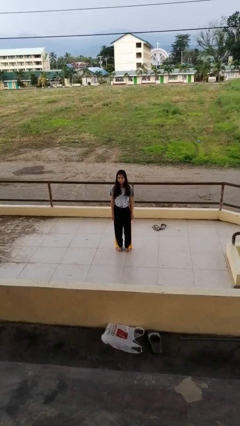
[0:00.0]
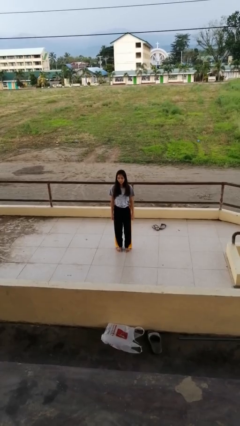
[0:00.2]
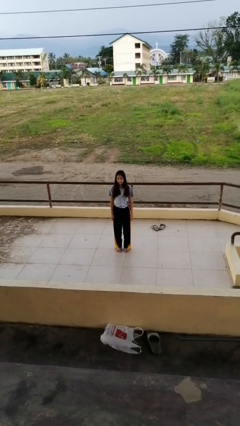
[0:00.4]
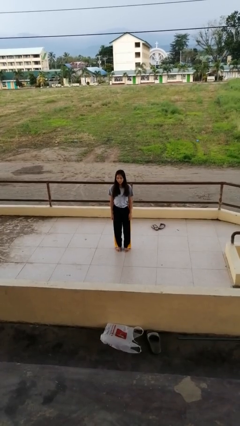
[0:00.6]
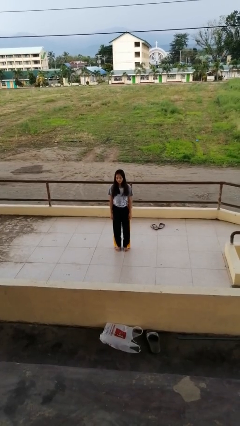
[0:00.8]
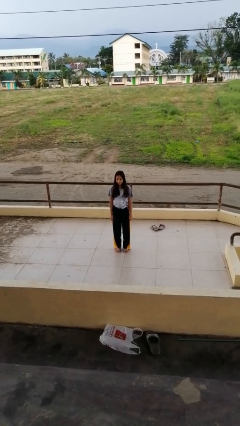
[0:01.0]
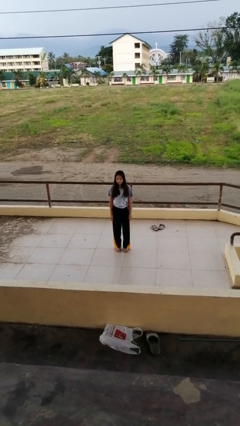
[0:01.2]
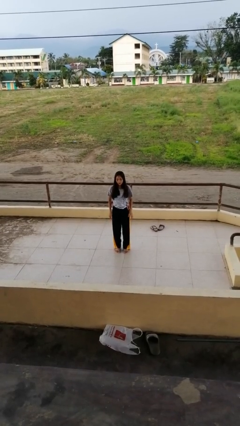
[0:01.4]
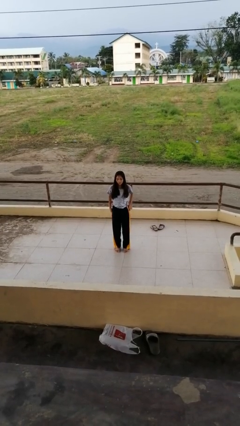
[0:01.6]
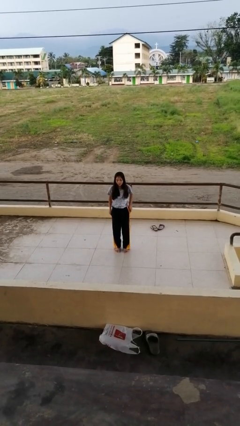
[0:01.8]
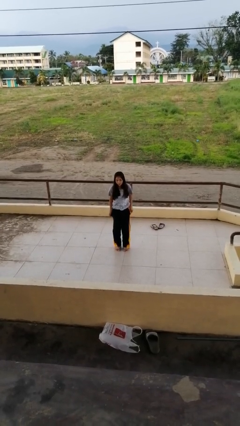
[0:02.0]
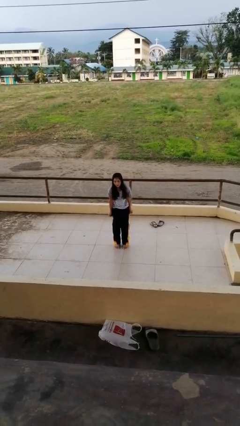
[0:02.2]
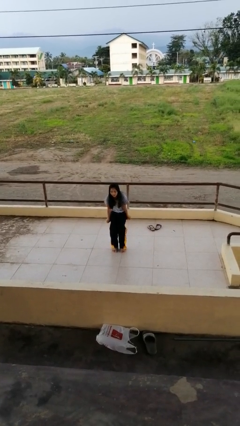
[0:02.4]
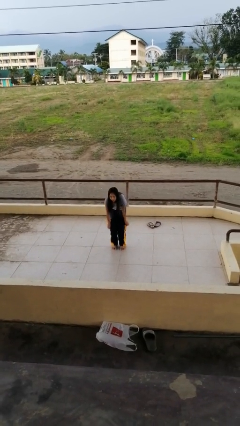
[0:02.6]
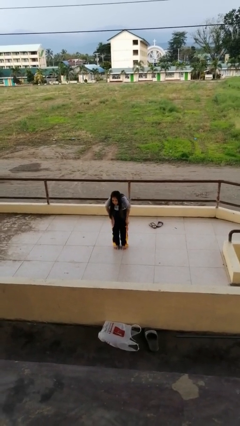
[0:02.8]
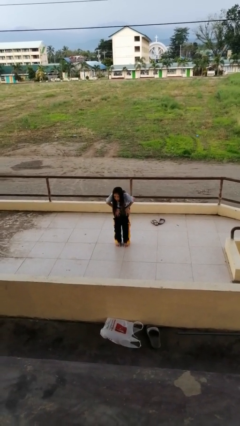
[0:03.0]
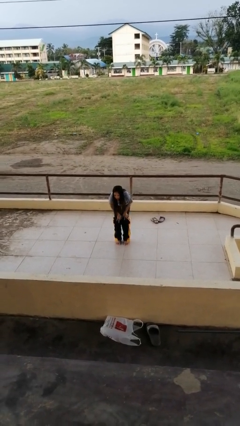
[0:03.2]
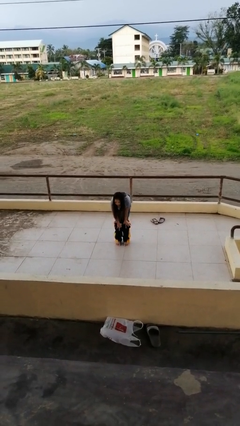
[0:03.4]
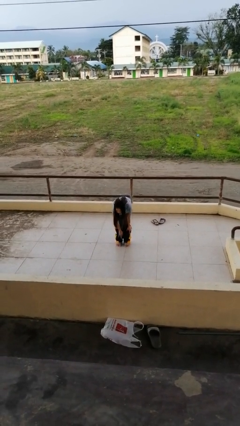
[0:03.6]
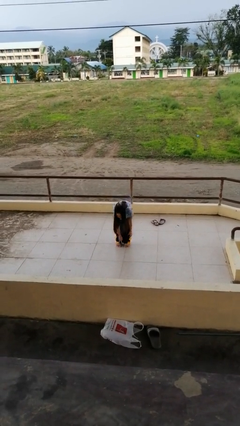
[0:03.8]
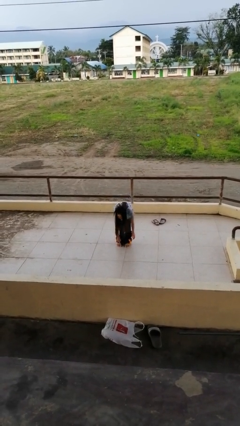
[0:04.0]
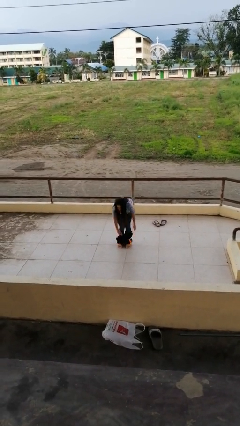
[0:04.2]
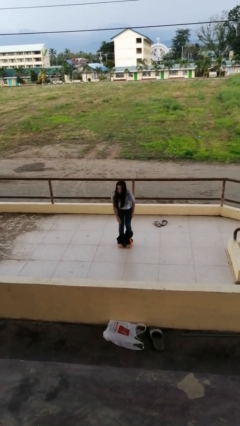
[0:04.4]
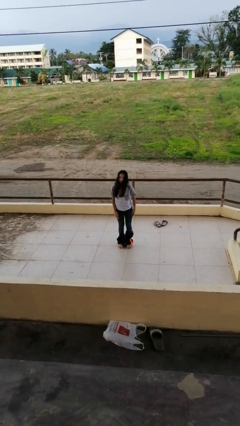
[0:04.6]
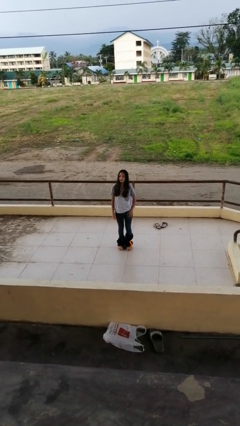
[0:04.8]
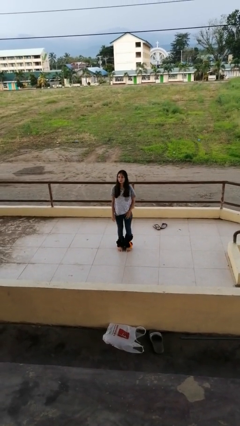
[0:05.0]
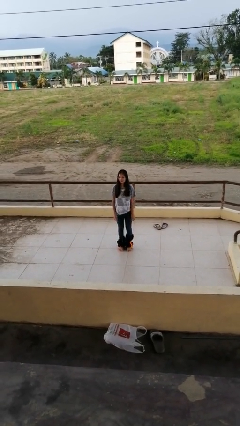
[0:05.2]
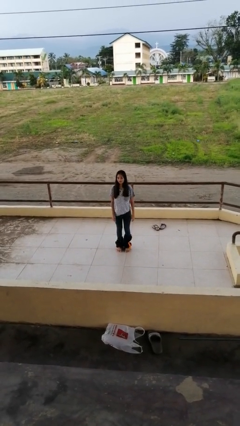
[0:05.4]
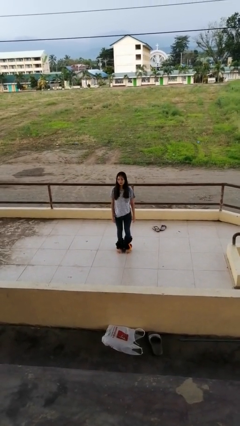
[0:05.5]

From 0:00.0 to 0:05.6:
person takes off pants

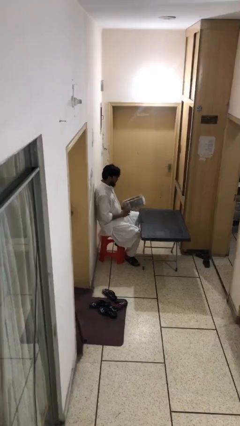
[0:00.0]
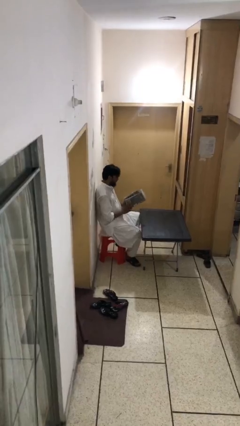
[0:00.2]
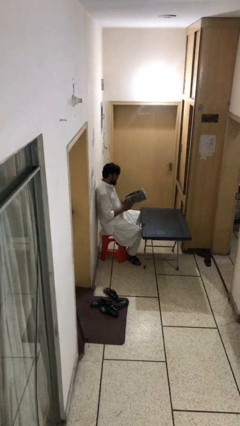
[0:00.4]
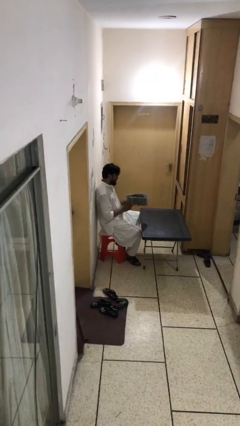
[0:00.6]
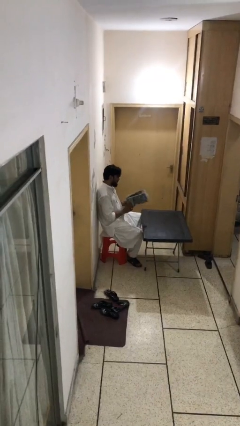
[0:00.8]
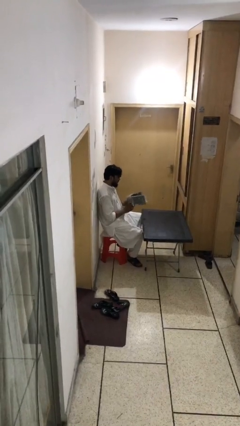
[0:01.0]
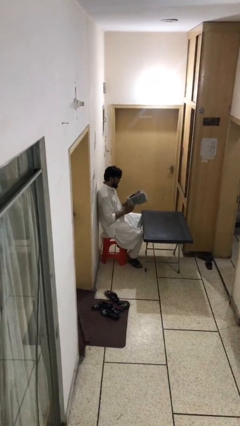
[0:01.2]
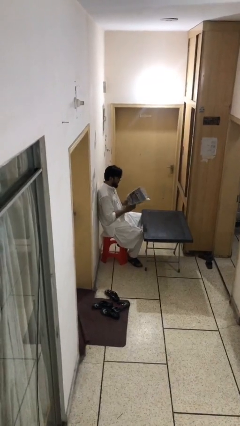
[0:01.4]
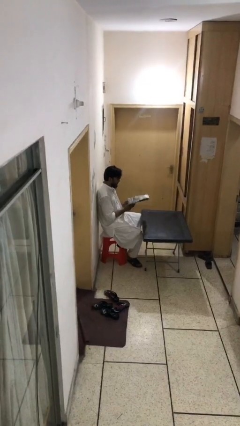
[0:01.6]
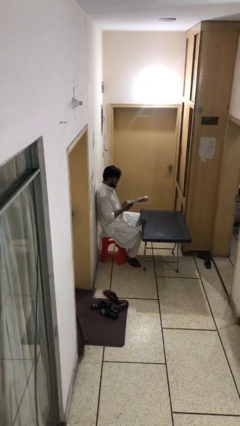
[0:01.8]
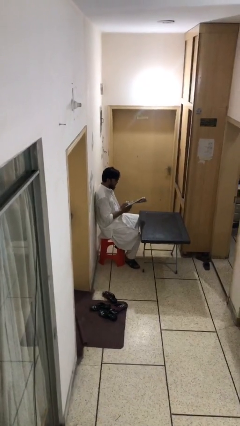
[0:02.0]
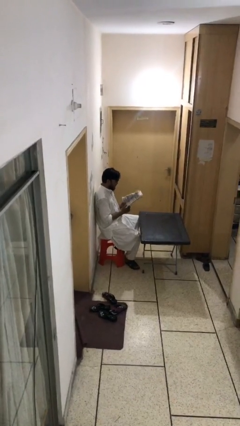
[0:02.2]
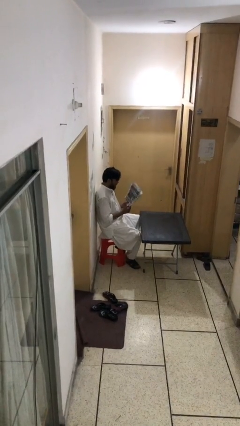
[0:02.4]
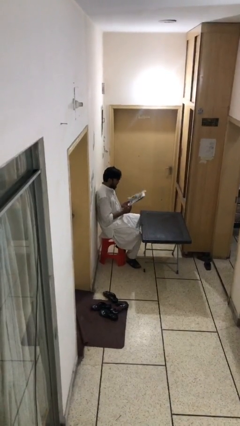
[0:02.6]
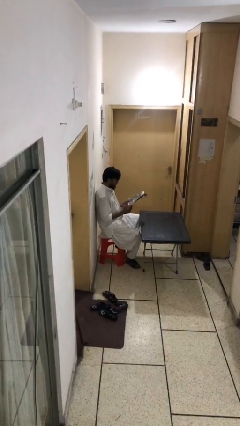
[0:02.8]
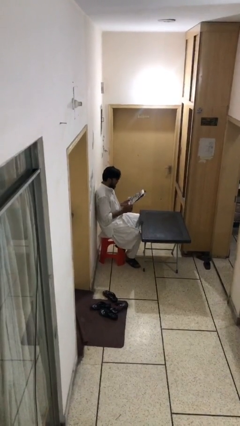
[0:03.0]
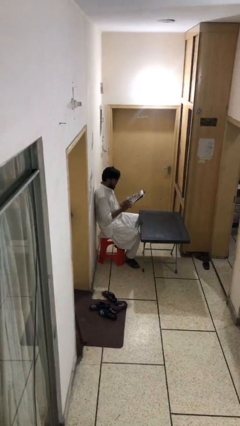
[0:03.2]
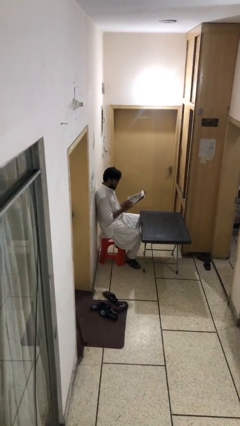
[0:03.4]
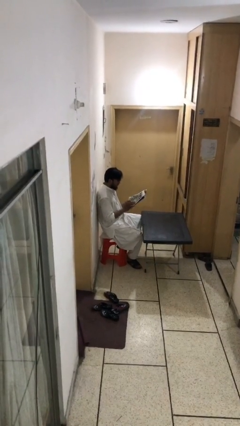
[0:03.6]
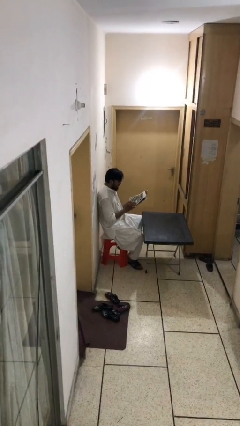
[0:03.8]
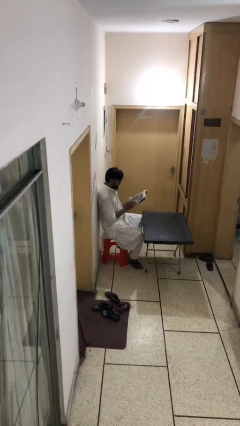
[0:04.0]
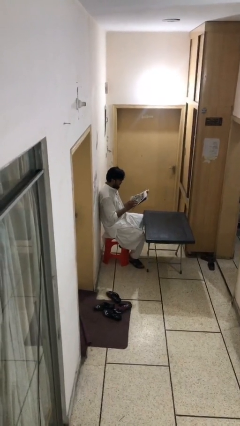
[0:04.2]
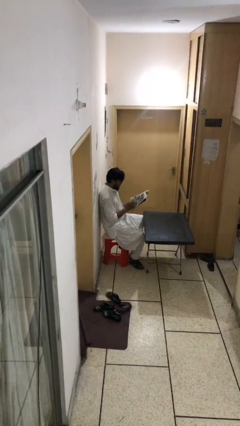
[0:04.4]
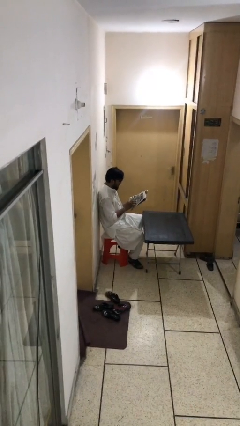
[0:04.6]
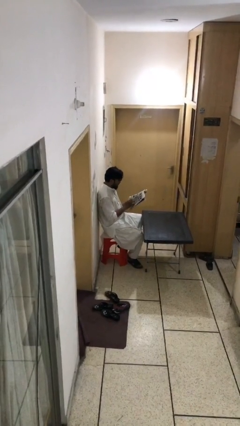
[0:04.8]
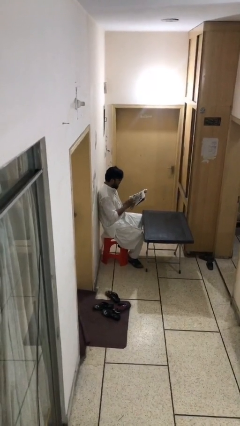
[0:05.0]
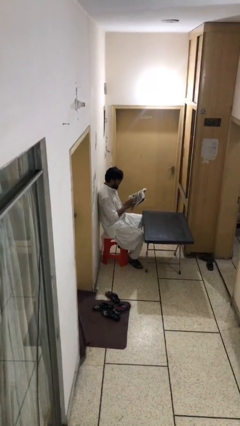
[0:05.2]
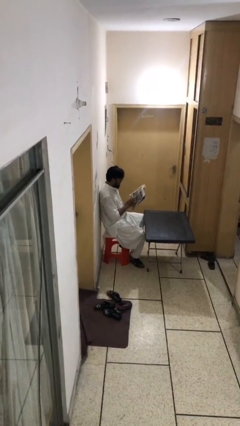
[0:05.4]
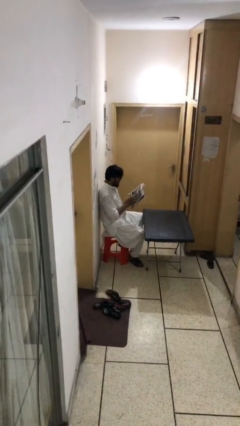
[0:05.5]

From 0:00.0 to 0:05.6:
person reads document

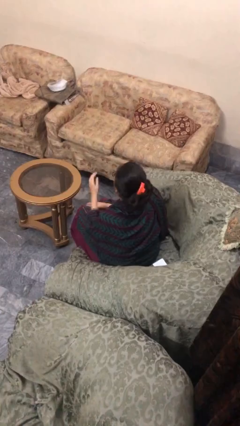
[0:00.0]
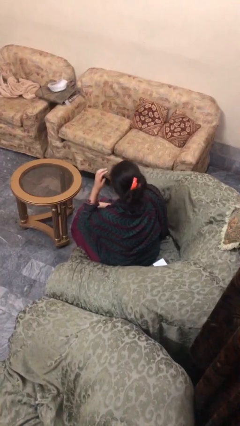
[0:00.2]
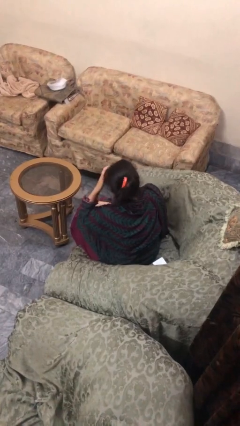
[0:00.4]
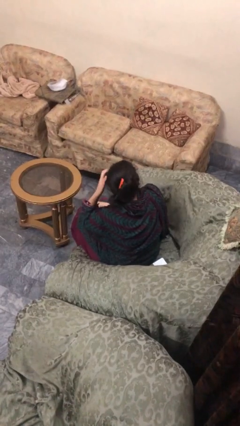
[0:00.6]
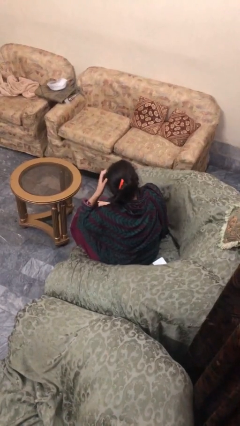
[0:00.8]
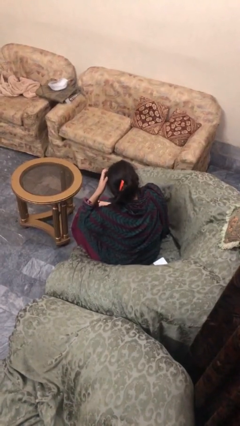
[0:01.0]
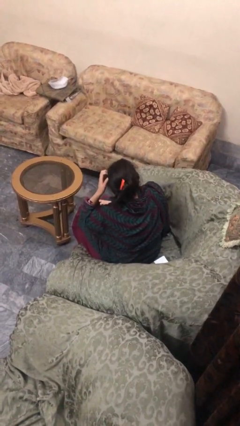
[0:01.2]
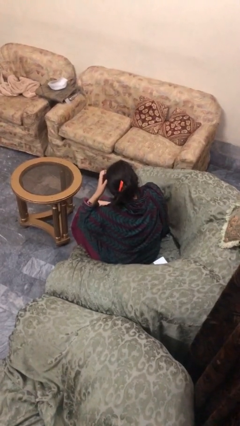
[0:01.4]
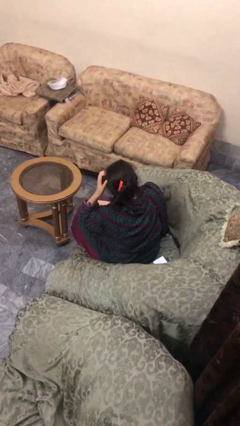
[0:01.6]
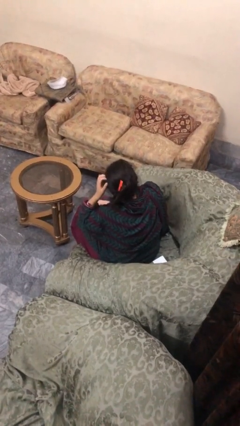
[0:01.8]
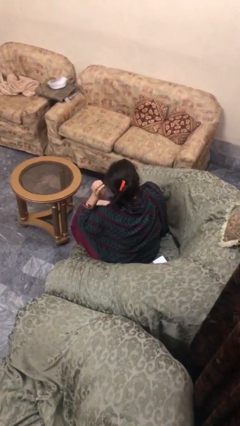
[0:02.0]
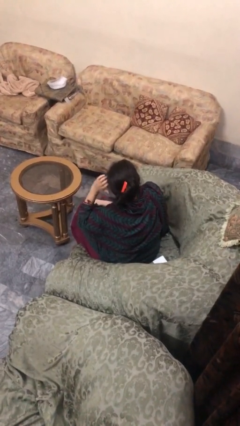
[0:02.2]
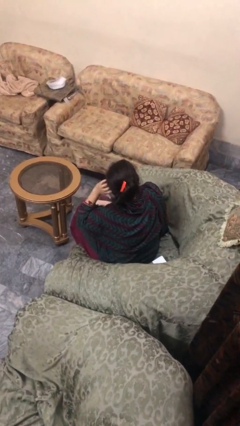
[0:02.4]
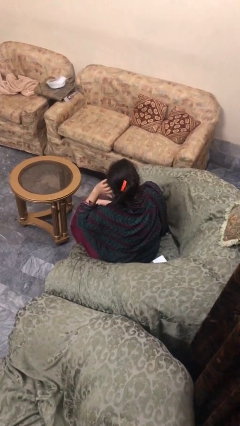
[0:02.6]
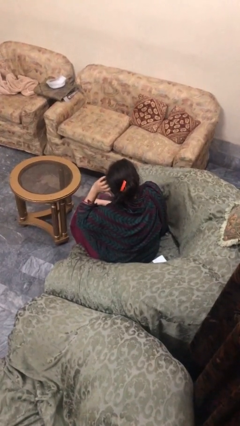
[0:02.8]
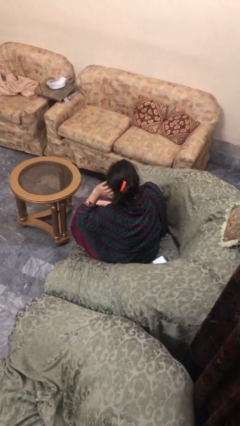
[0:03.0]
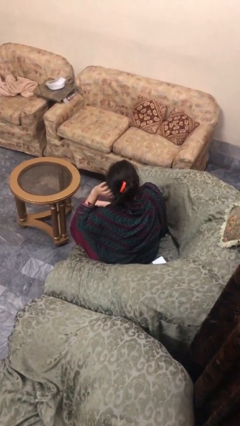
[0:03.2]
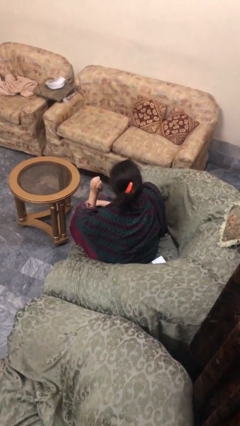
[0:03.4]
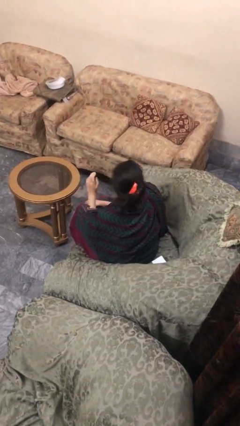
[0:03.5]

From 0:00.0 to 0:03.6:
person strokes hair

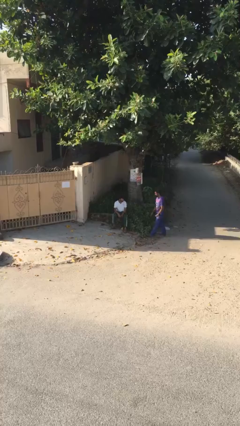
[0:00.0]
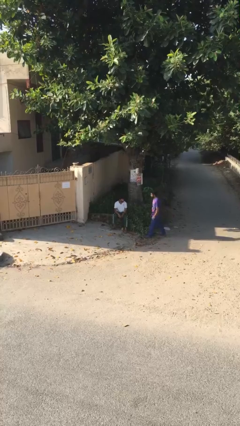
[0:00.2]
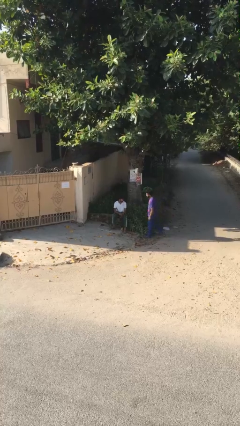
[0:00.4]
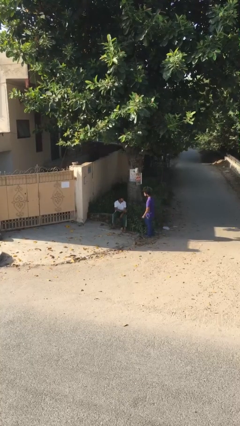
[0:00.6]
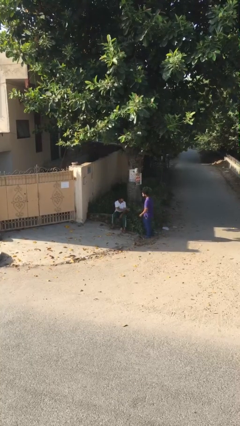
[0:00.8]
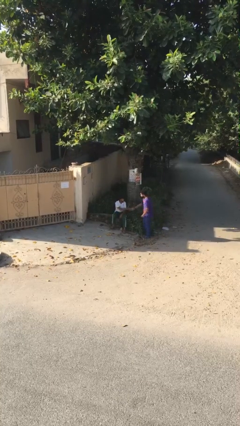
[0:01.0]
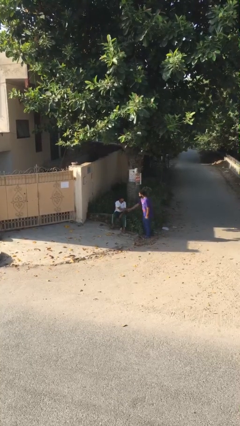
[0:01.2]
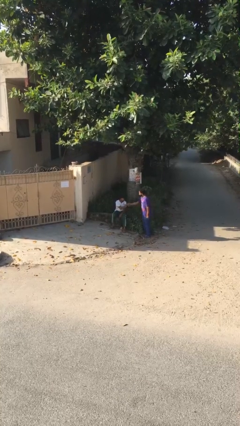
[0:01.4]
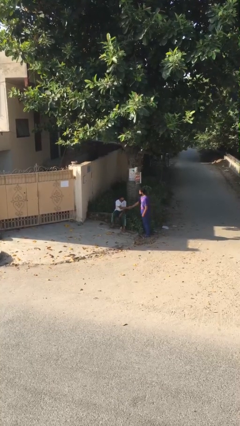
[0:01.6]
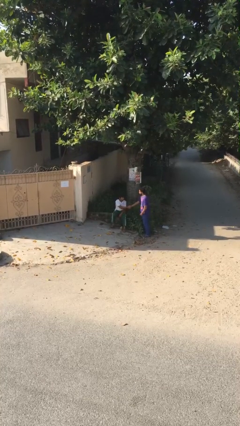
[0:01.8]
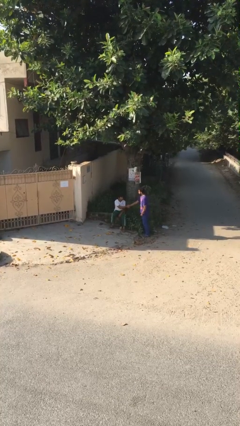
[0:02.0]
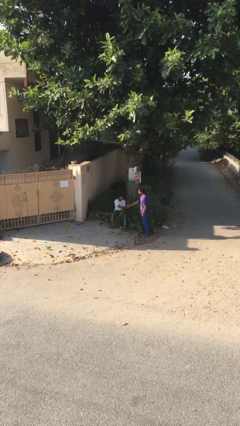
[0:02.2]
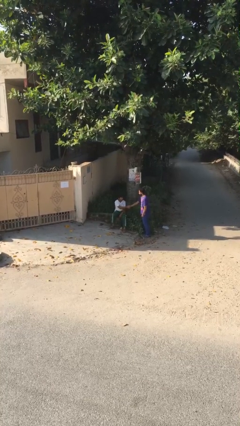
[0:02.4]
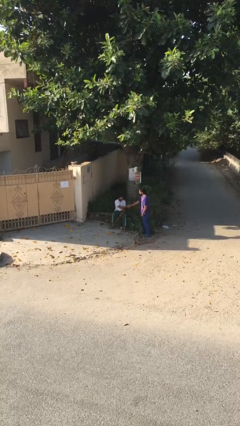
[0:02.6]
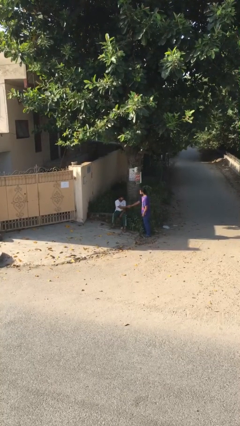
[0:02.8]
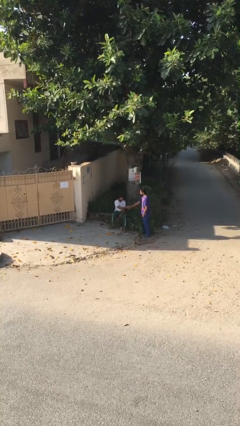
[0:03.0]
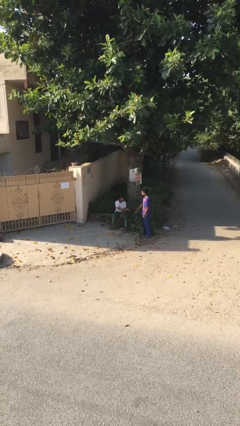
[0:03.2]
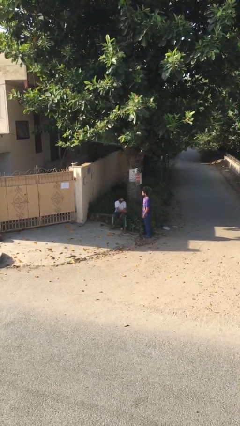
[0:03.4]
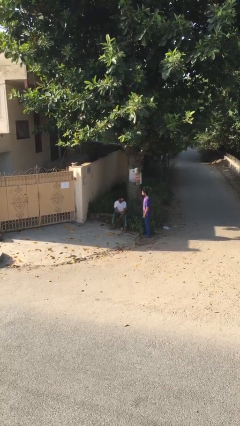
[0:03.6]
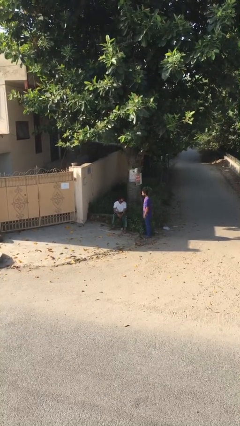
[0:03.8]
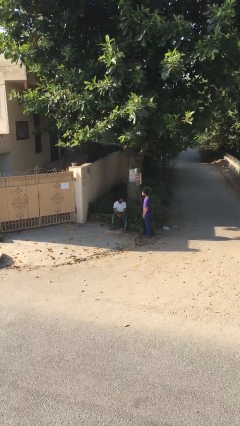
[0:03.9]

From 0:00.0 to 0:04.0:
person shakes hand
